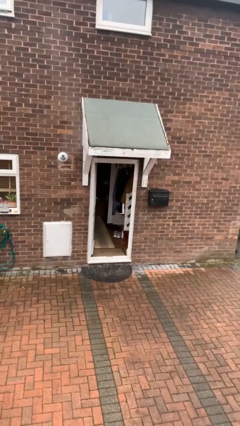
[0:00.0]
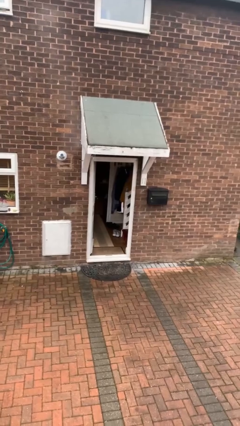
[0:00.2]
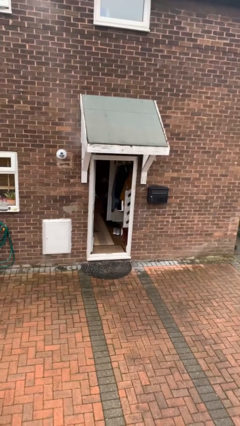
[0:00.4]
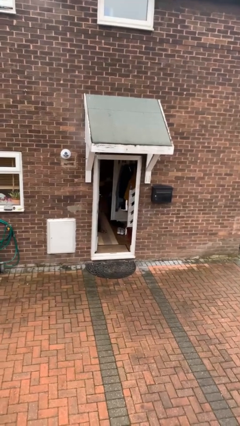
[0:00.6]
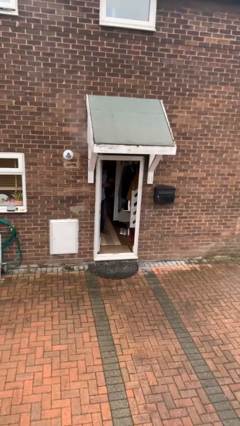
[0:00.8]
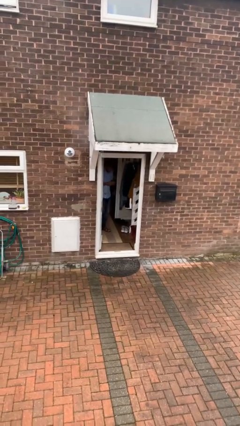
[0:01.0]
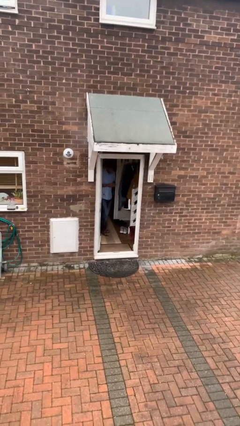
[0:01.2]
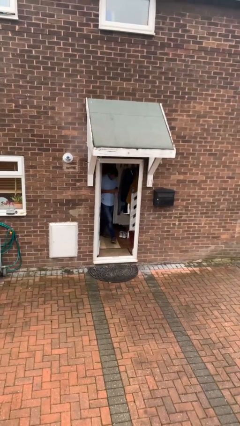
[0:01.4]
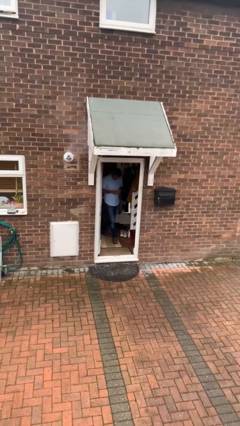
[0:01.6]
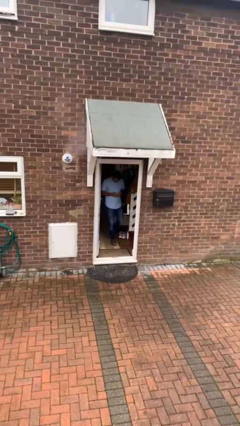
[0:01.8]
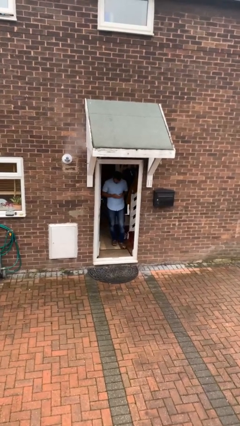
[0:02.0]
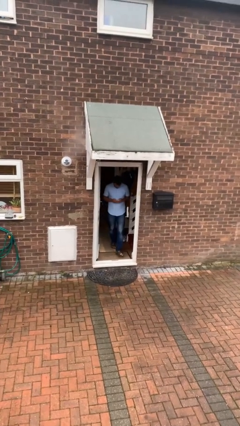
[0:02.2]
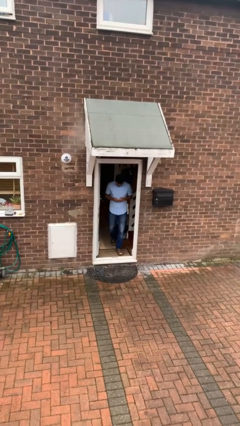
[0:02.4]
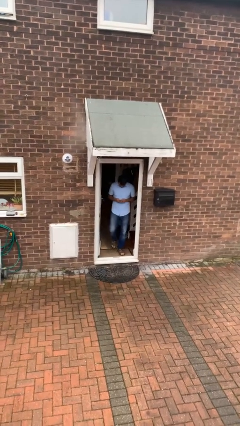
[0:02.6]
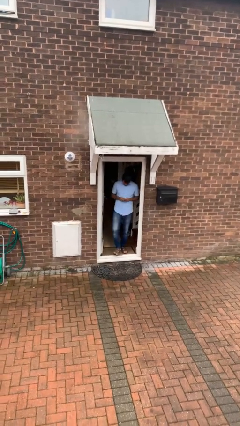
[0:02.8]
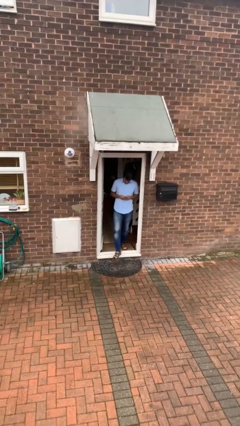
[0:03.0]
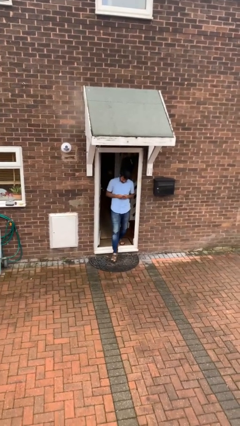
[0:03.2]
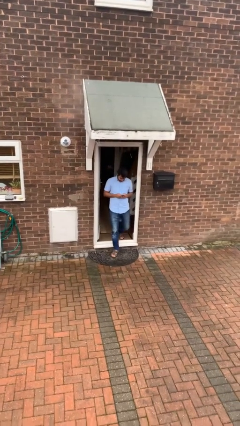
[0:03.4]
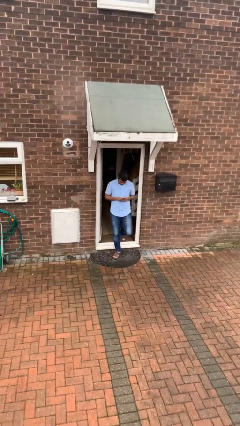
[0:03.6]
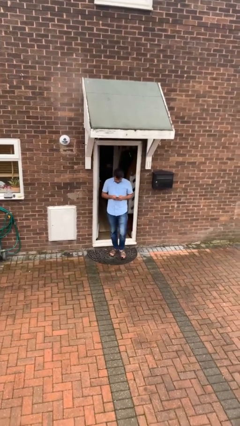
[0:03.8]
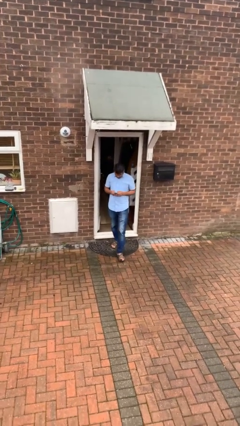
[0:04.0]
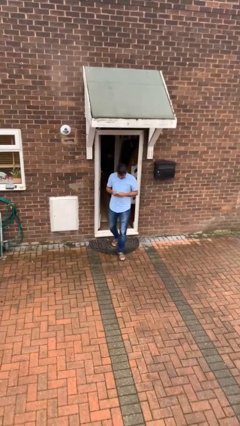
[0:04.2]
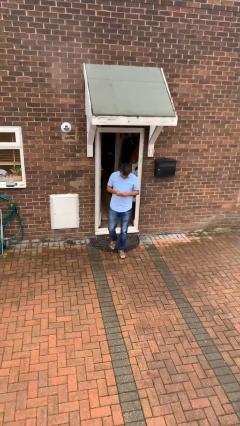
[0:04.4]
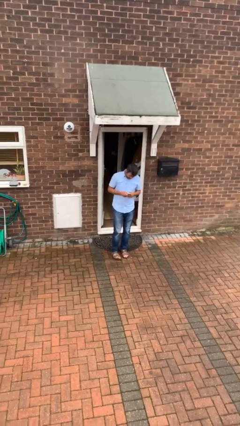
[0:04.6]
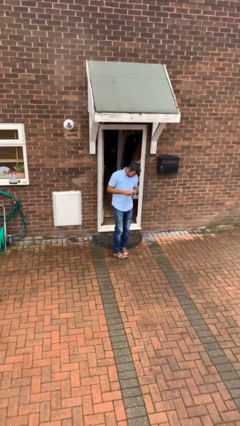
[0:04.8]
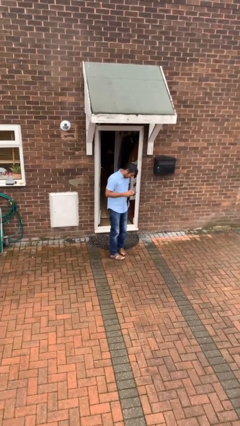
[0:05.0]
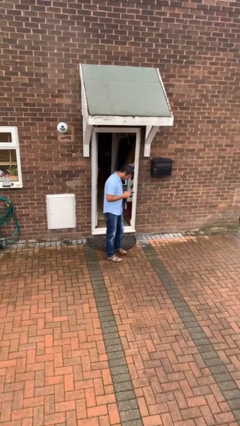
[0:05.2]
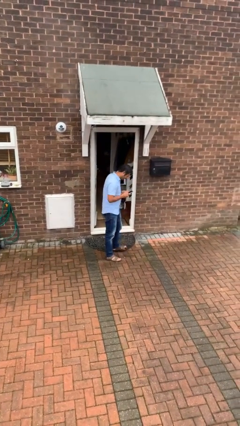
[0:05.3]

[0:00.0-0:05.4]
person enters scene through structure

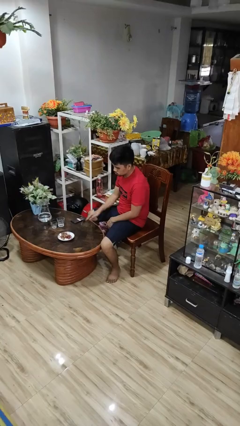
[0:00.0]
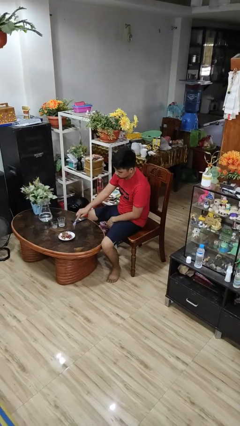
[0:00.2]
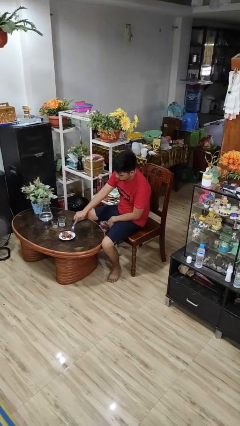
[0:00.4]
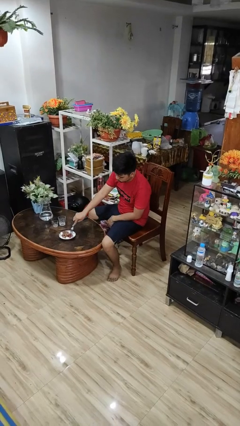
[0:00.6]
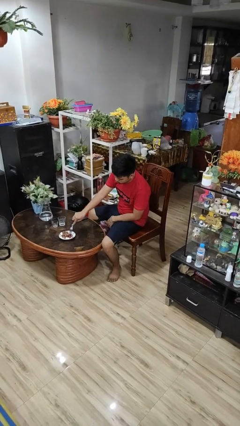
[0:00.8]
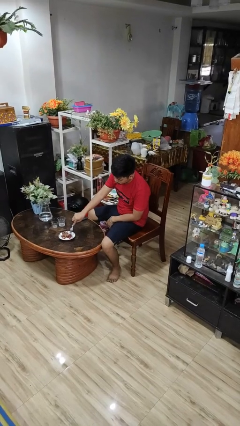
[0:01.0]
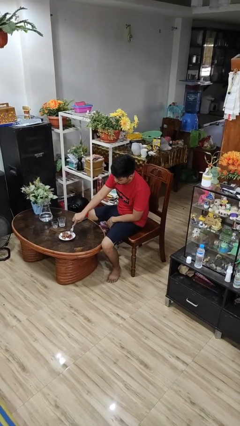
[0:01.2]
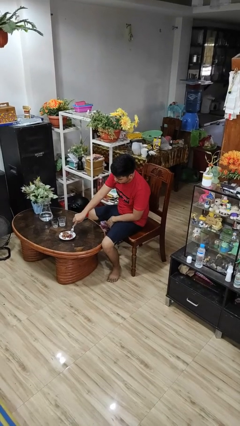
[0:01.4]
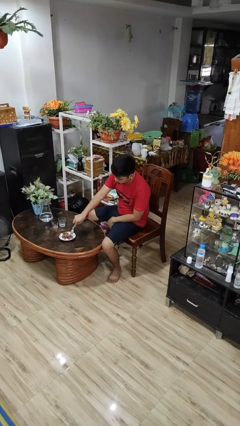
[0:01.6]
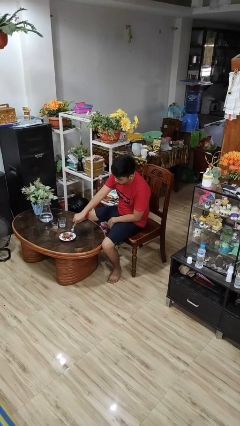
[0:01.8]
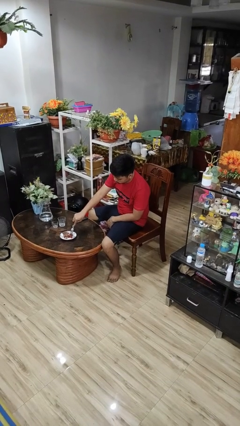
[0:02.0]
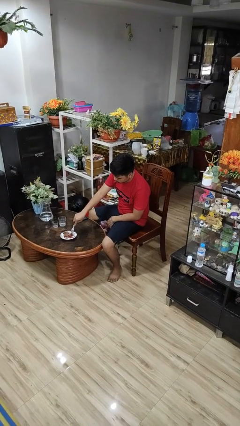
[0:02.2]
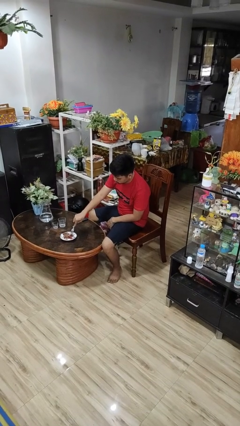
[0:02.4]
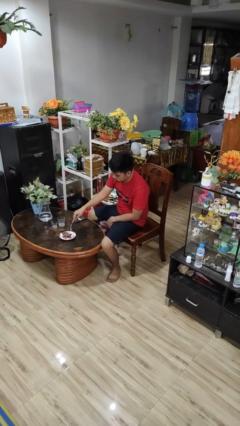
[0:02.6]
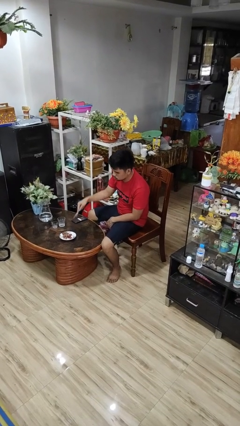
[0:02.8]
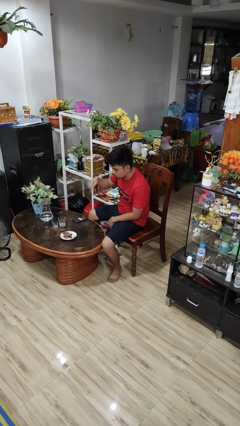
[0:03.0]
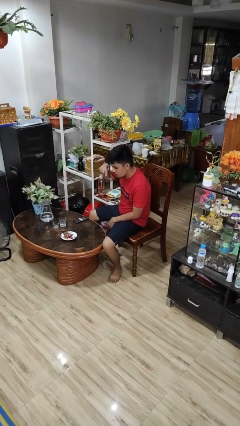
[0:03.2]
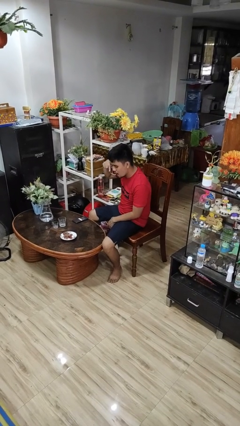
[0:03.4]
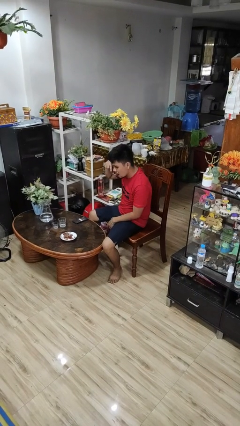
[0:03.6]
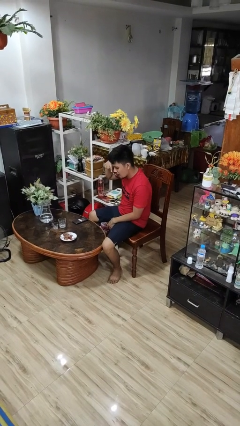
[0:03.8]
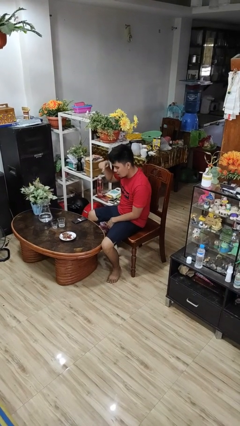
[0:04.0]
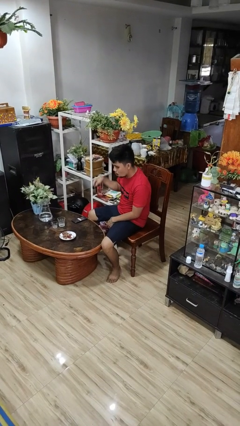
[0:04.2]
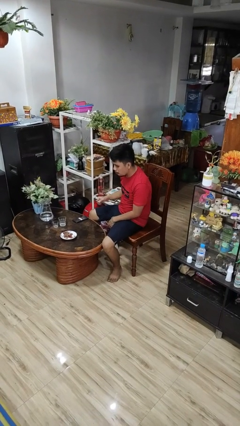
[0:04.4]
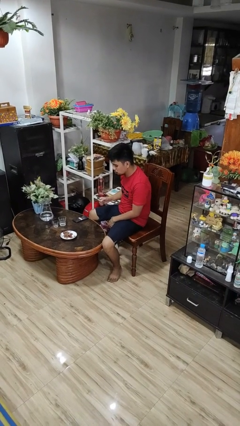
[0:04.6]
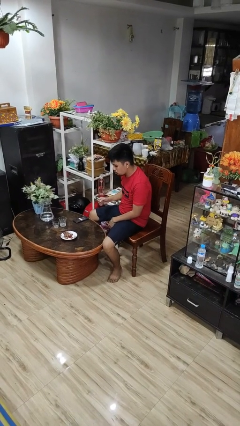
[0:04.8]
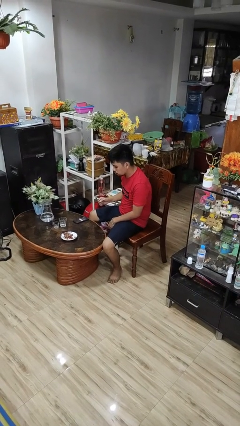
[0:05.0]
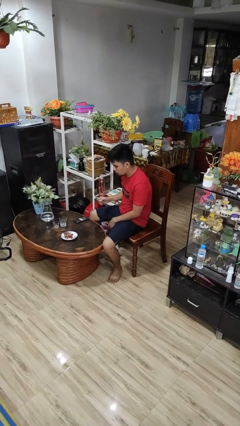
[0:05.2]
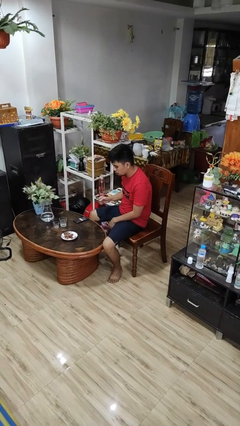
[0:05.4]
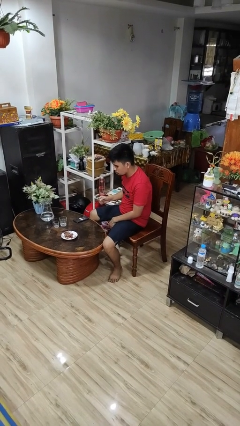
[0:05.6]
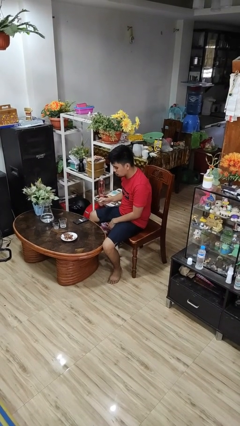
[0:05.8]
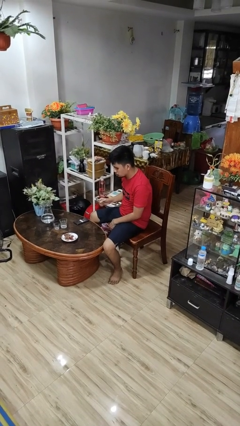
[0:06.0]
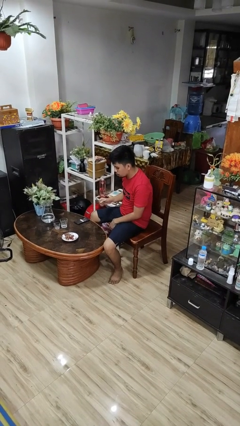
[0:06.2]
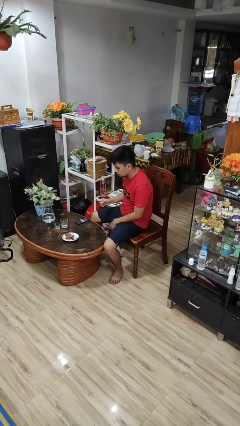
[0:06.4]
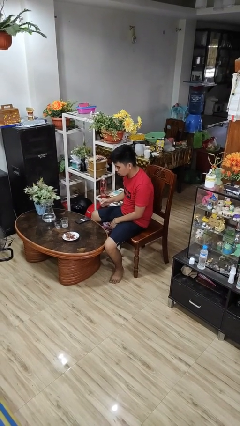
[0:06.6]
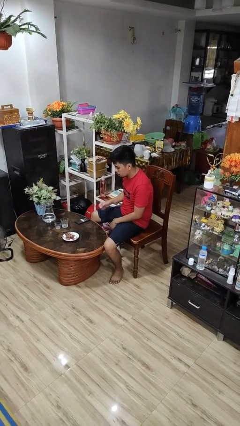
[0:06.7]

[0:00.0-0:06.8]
person eats with utensil

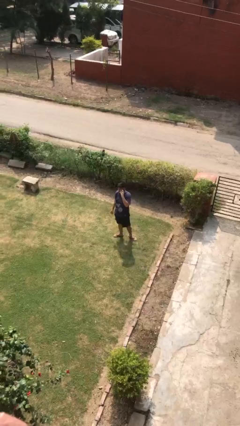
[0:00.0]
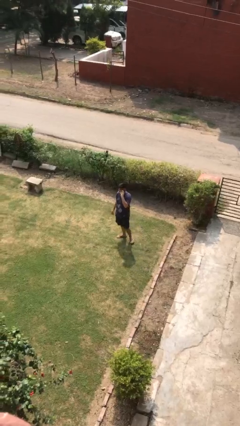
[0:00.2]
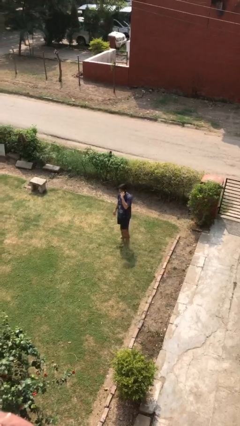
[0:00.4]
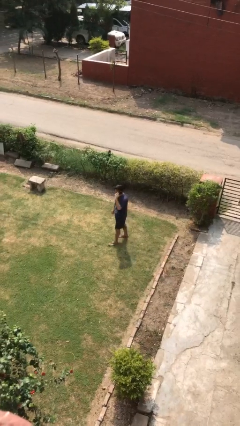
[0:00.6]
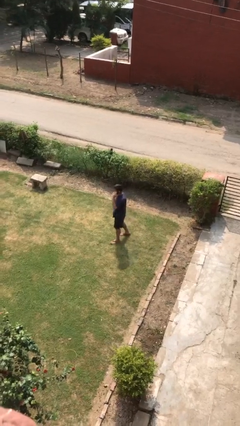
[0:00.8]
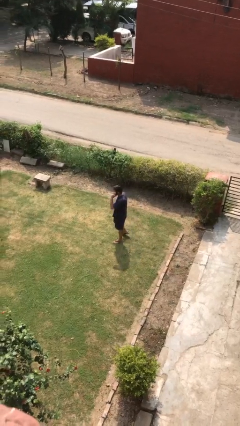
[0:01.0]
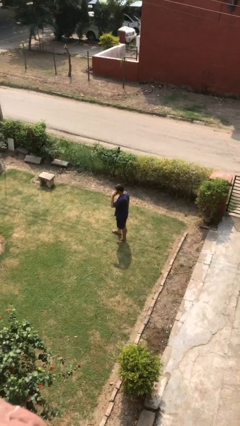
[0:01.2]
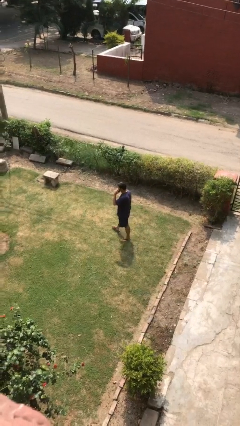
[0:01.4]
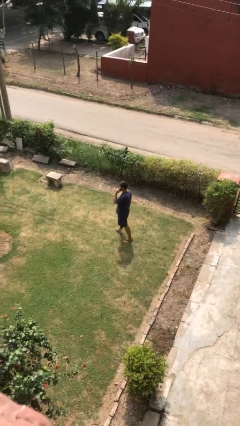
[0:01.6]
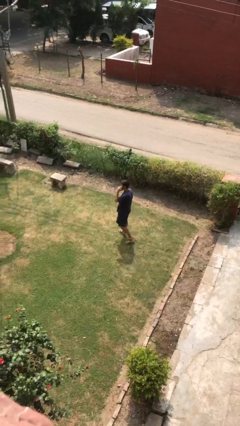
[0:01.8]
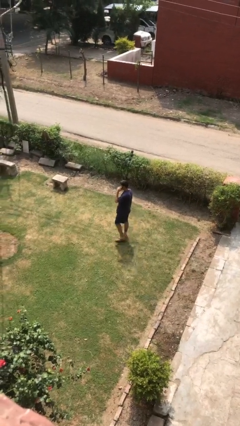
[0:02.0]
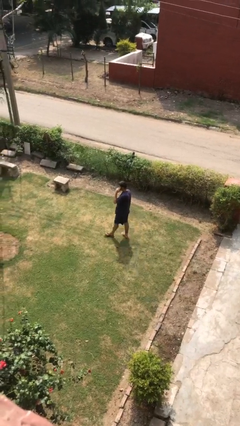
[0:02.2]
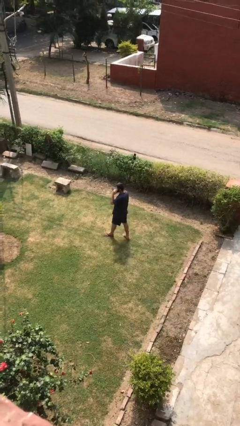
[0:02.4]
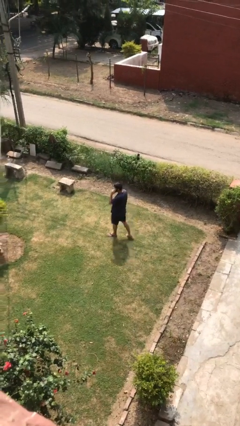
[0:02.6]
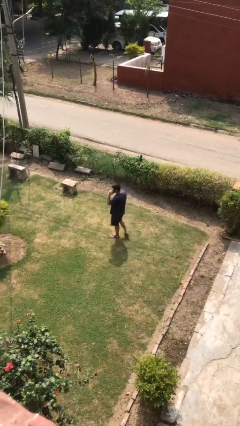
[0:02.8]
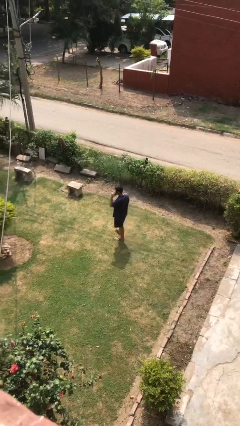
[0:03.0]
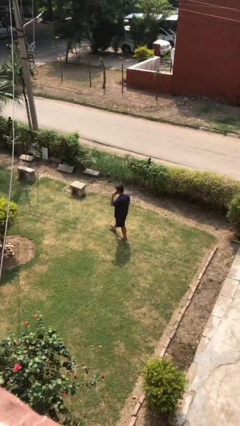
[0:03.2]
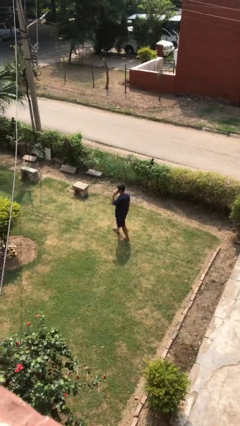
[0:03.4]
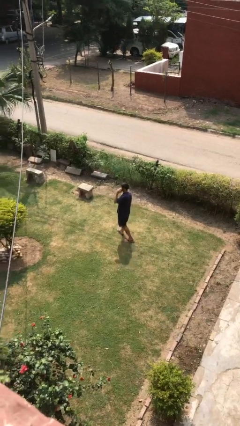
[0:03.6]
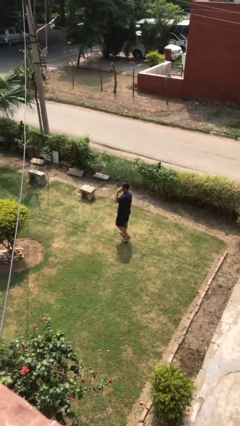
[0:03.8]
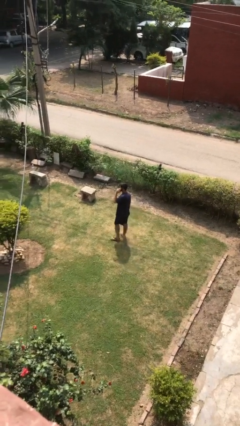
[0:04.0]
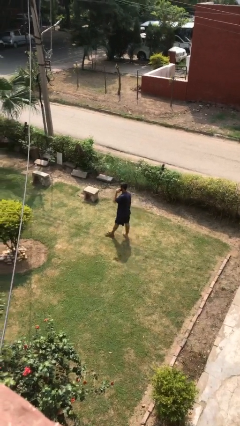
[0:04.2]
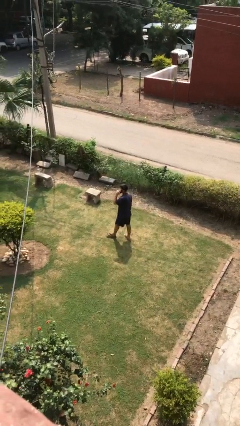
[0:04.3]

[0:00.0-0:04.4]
person talks on phone

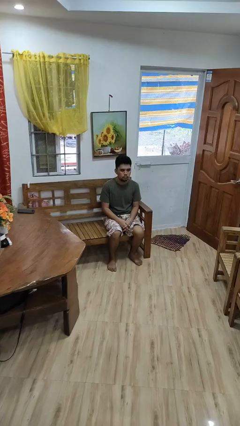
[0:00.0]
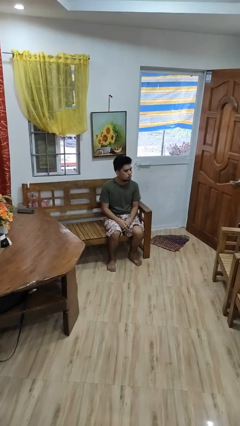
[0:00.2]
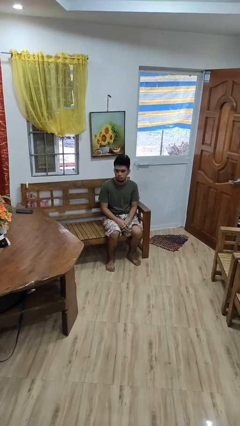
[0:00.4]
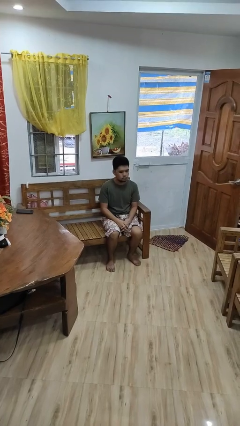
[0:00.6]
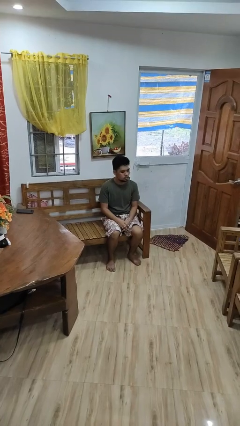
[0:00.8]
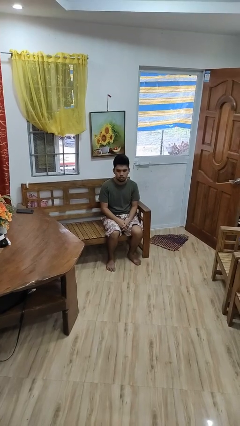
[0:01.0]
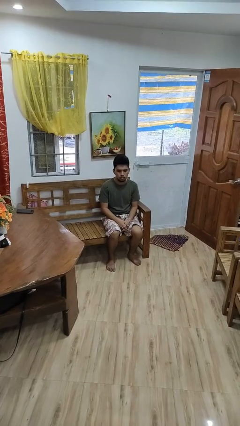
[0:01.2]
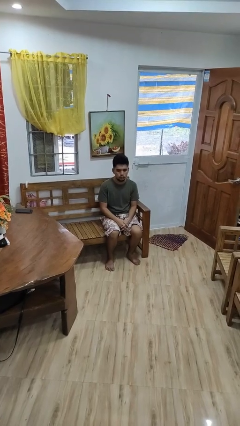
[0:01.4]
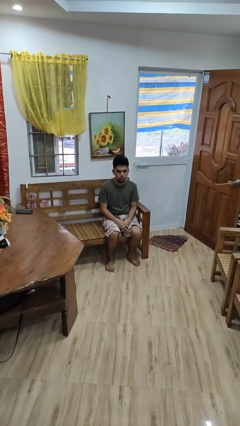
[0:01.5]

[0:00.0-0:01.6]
person shakes head
